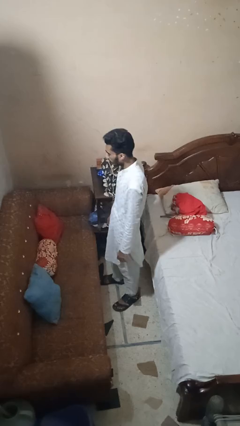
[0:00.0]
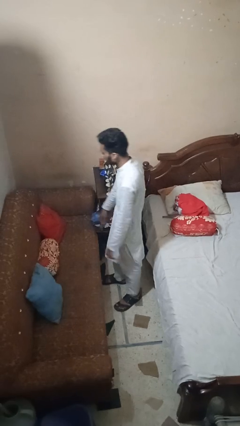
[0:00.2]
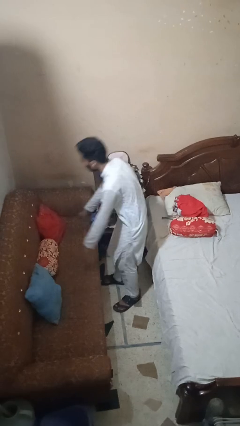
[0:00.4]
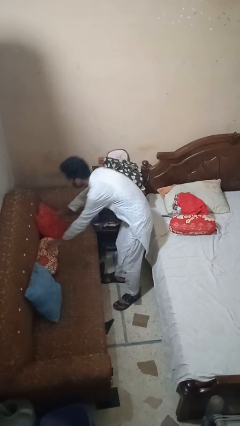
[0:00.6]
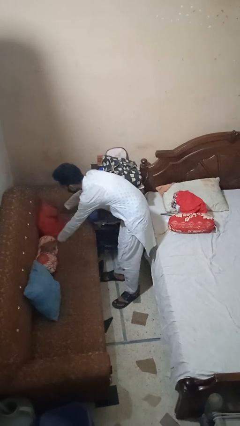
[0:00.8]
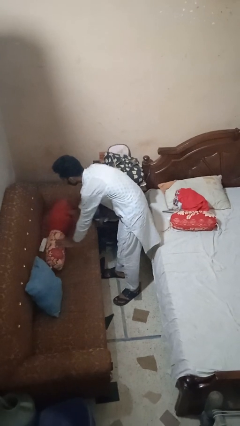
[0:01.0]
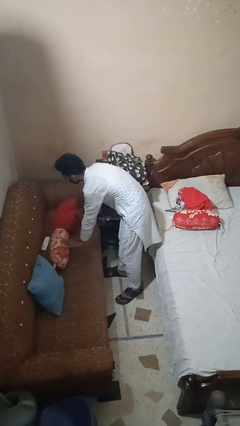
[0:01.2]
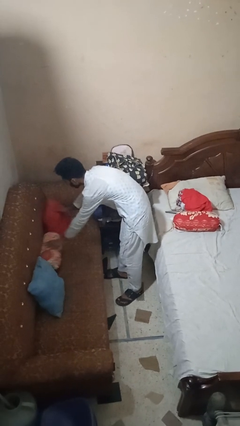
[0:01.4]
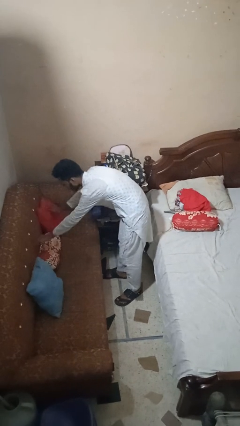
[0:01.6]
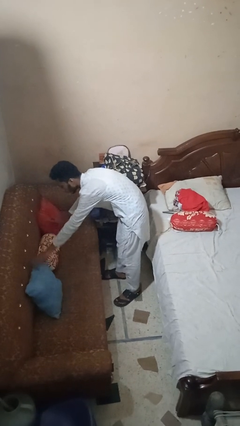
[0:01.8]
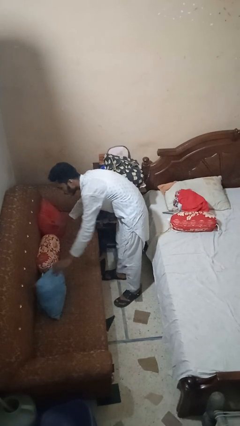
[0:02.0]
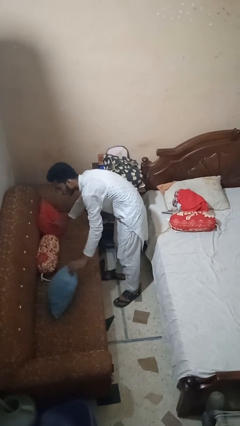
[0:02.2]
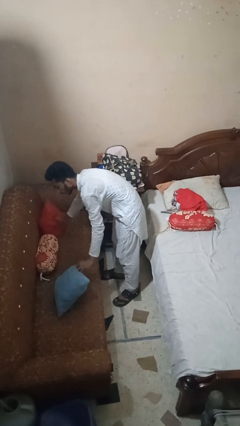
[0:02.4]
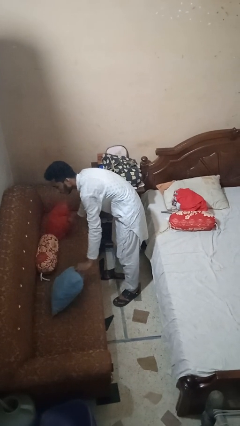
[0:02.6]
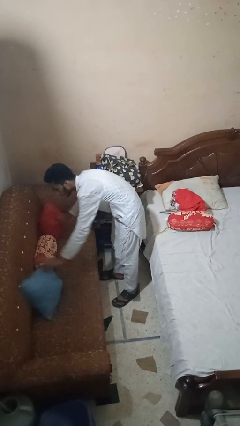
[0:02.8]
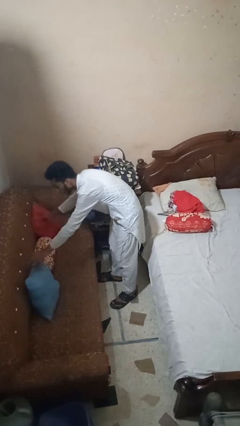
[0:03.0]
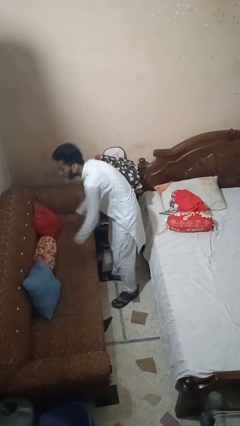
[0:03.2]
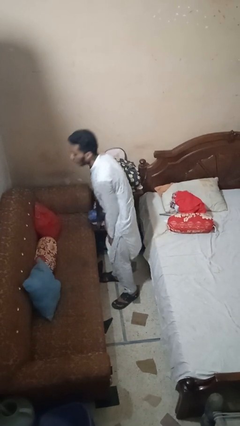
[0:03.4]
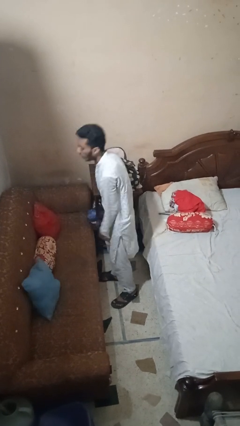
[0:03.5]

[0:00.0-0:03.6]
person searches in couch

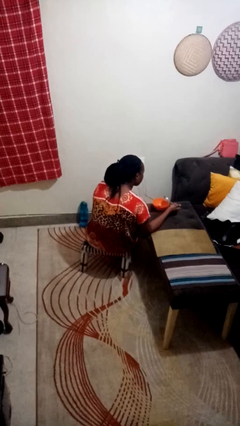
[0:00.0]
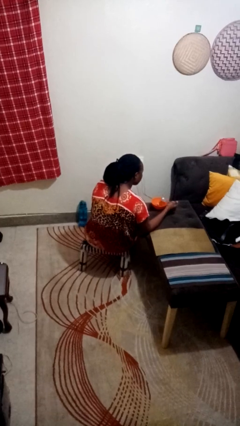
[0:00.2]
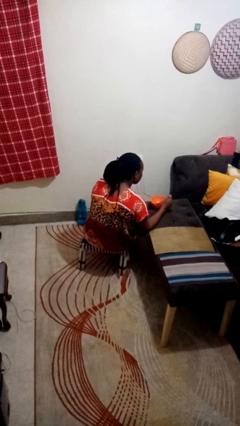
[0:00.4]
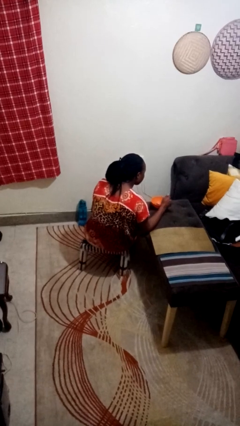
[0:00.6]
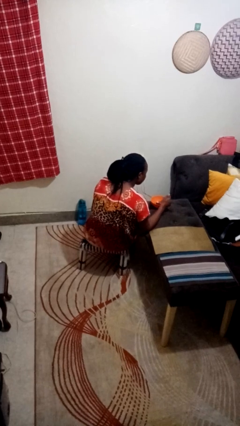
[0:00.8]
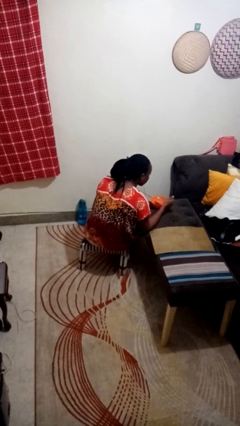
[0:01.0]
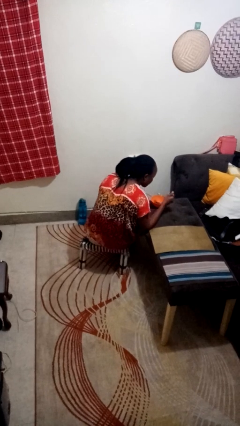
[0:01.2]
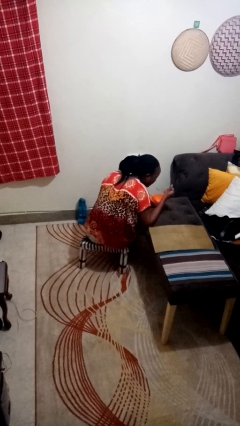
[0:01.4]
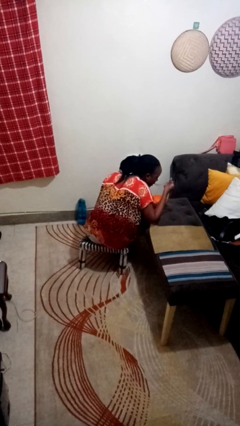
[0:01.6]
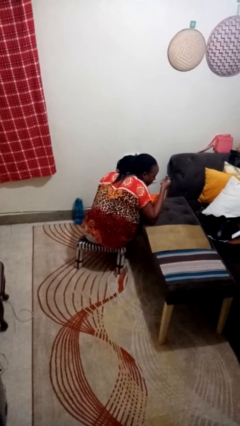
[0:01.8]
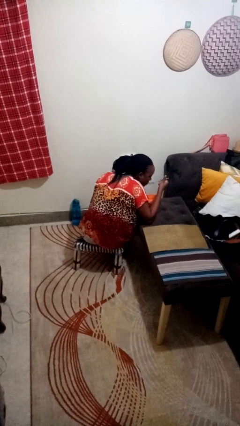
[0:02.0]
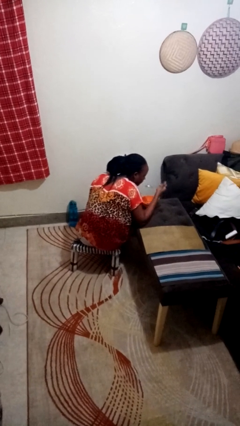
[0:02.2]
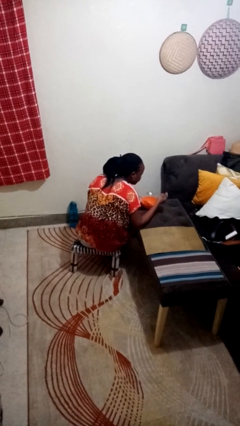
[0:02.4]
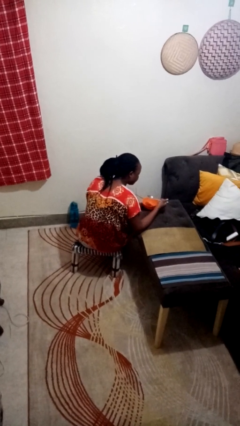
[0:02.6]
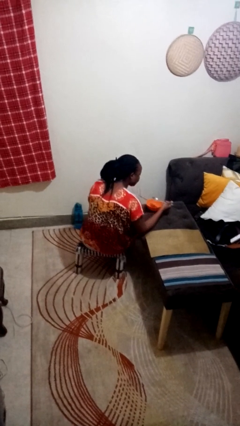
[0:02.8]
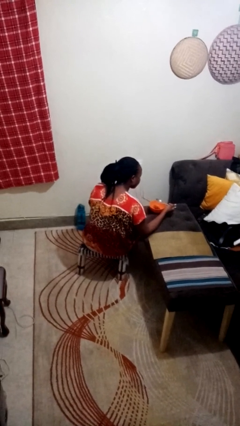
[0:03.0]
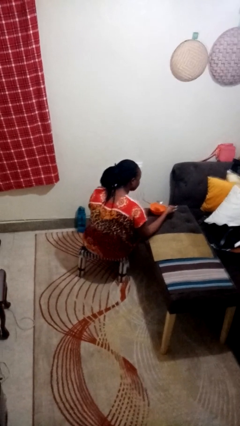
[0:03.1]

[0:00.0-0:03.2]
person eats with utensil

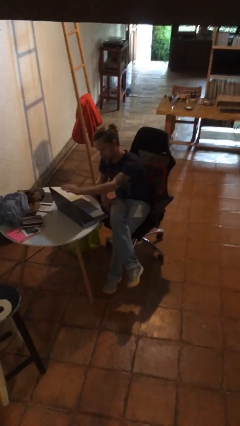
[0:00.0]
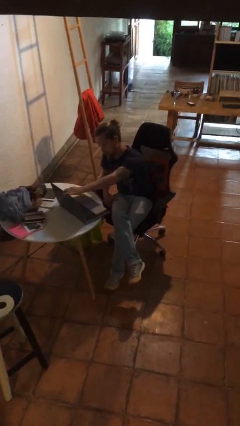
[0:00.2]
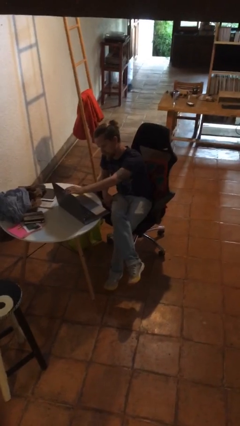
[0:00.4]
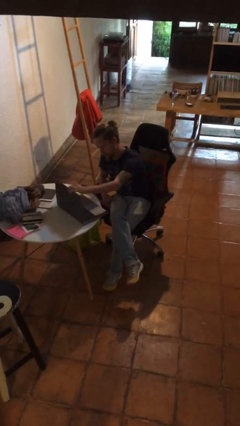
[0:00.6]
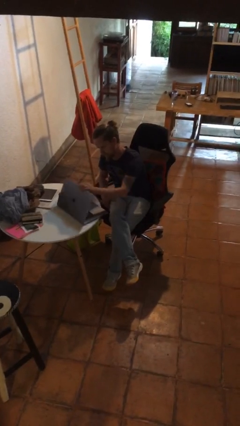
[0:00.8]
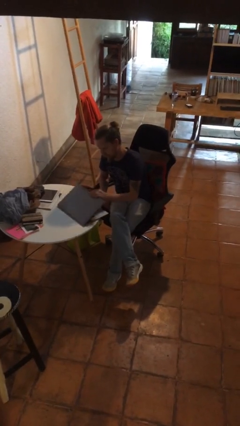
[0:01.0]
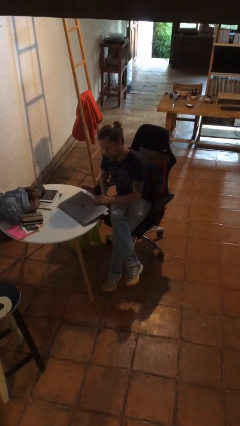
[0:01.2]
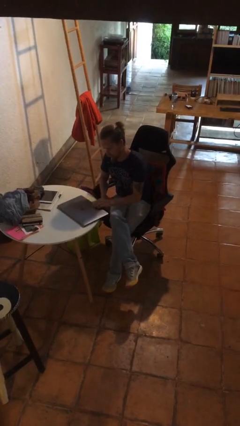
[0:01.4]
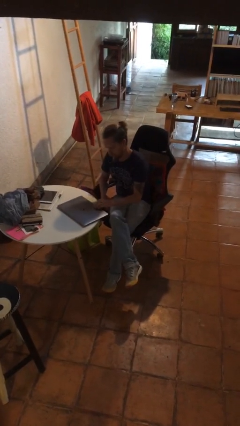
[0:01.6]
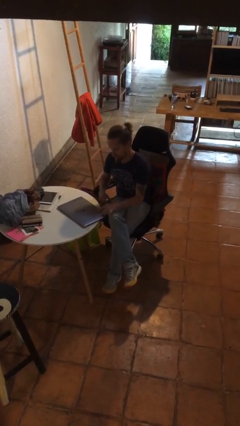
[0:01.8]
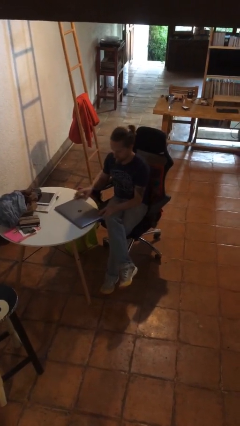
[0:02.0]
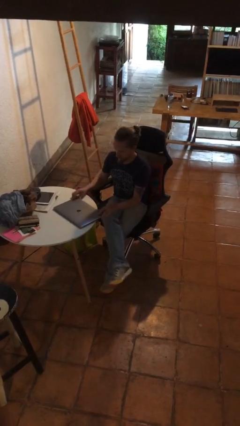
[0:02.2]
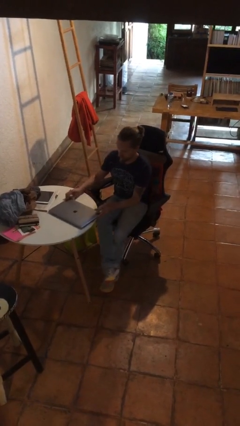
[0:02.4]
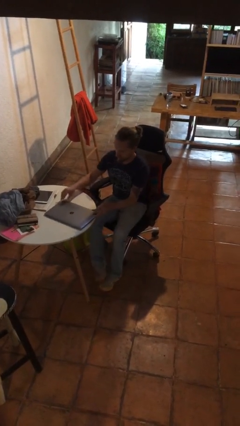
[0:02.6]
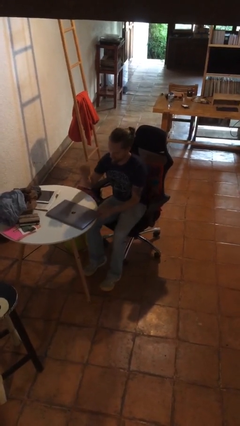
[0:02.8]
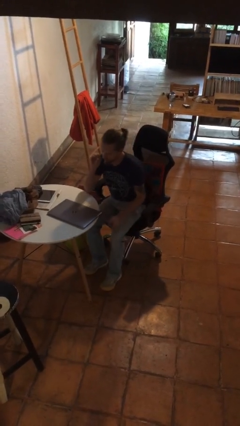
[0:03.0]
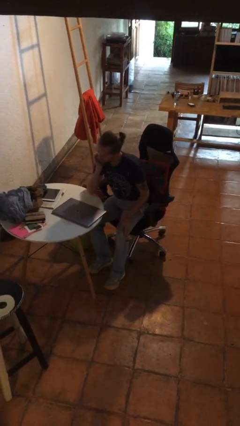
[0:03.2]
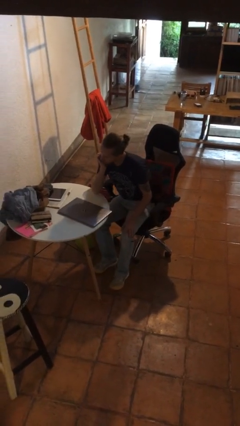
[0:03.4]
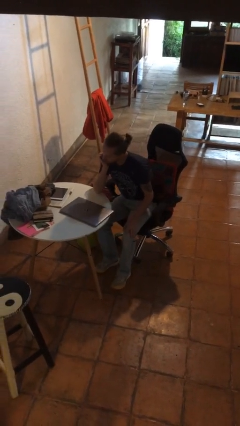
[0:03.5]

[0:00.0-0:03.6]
person closes laptop

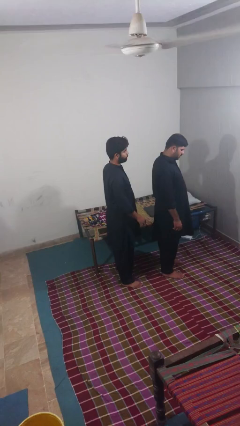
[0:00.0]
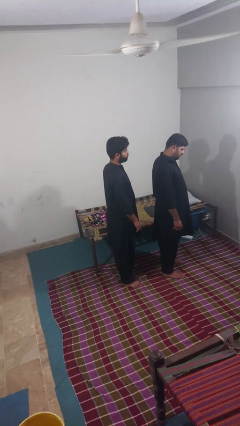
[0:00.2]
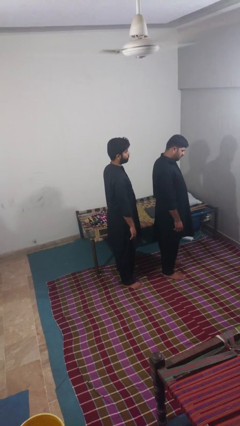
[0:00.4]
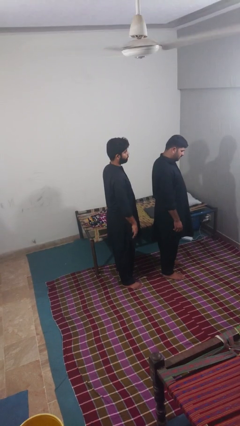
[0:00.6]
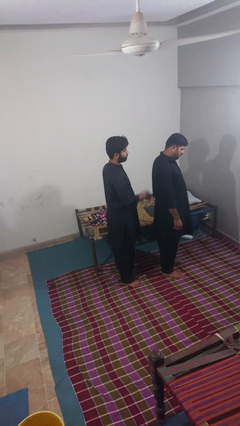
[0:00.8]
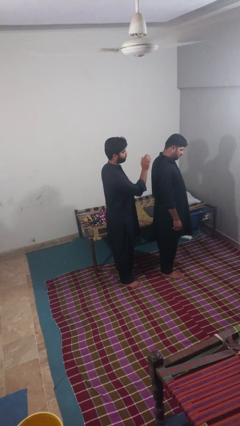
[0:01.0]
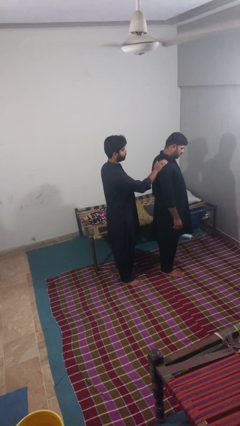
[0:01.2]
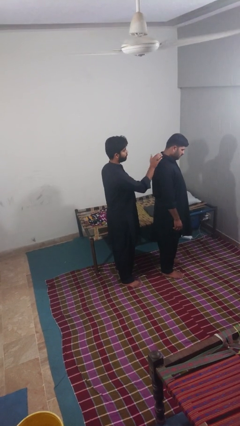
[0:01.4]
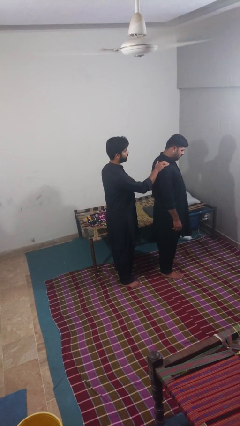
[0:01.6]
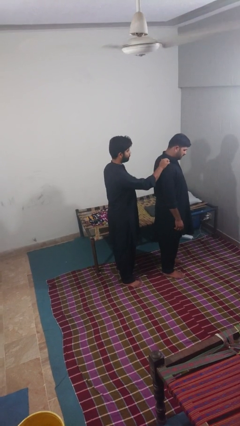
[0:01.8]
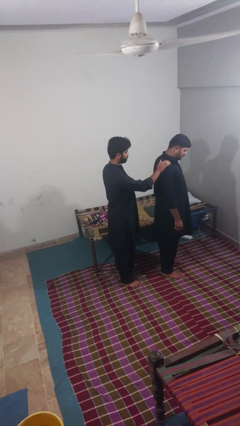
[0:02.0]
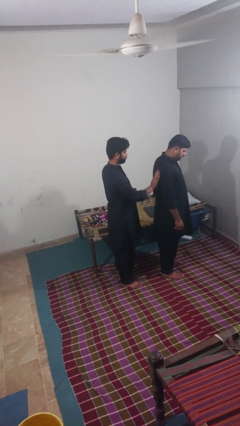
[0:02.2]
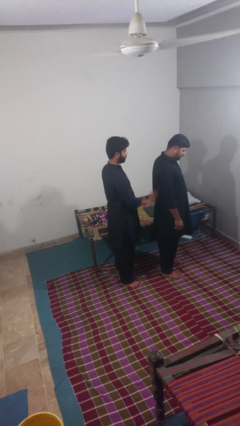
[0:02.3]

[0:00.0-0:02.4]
person touches back of person

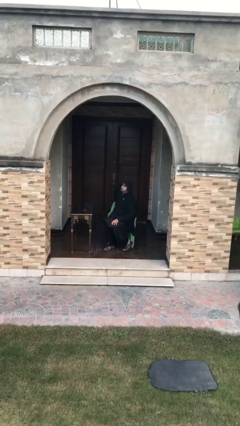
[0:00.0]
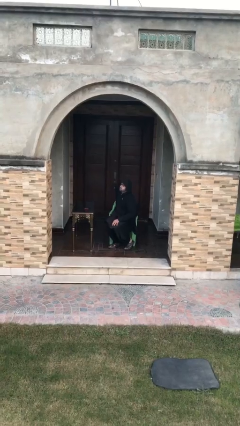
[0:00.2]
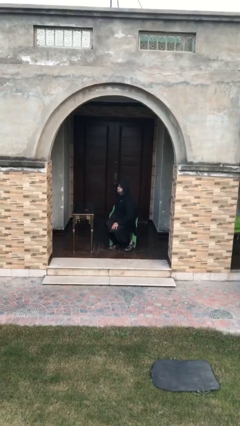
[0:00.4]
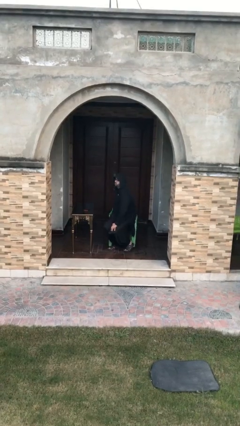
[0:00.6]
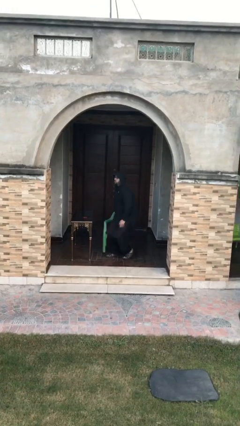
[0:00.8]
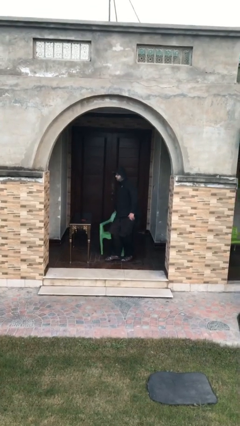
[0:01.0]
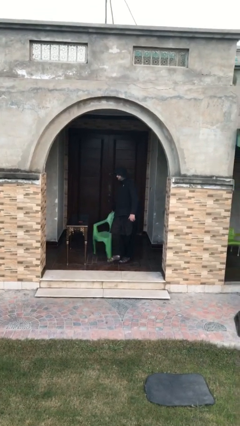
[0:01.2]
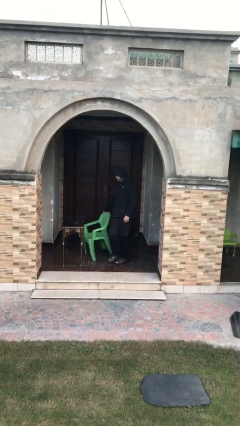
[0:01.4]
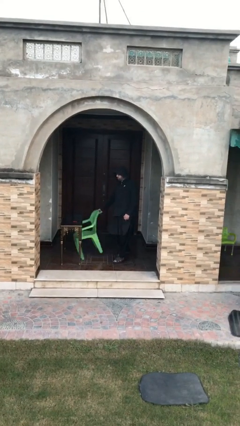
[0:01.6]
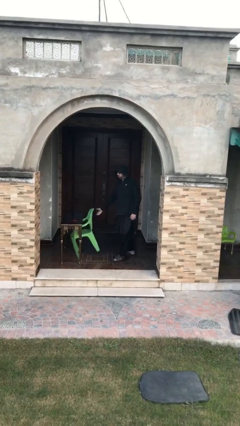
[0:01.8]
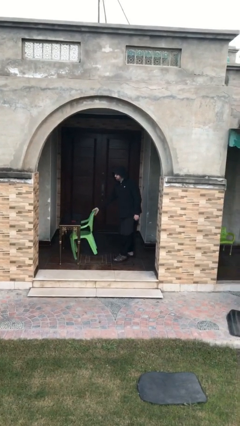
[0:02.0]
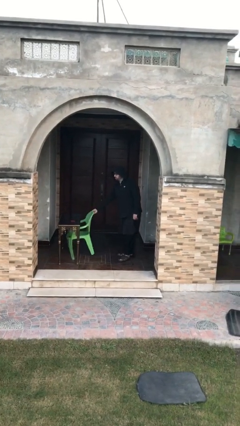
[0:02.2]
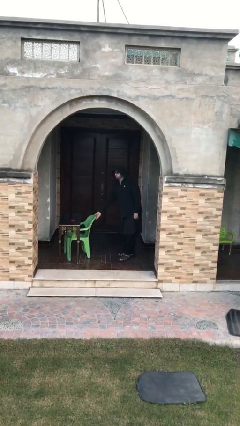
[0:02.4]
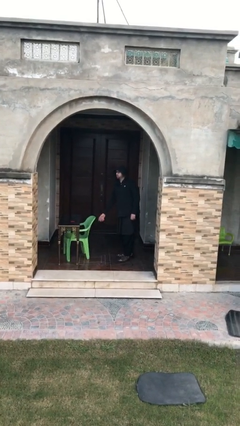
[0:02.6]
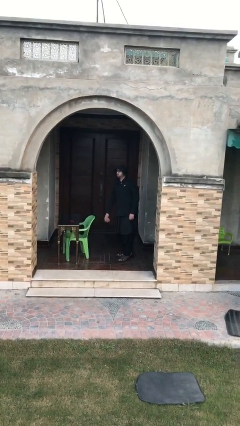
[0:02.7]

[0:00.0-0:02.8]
person stands up

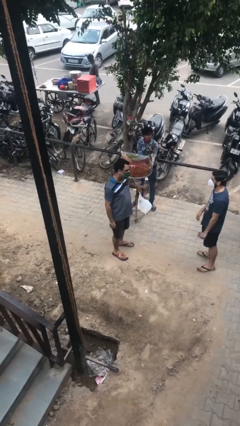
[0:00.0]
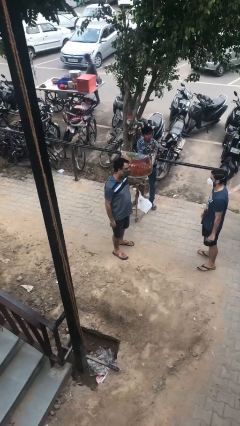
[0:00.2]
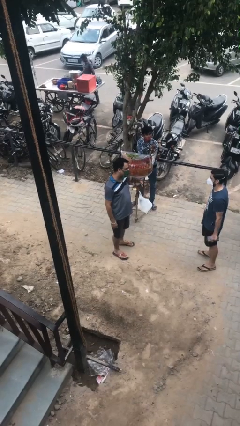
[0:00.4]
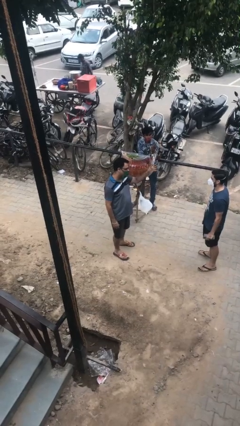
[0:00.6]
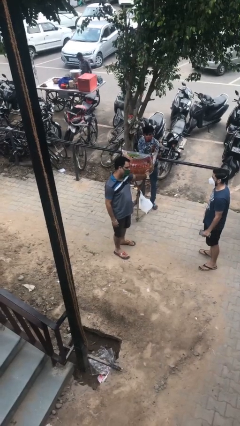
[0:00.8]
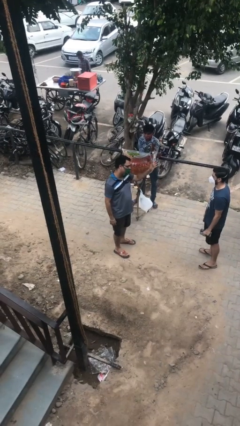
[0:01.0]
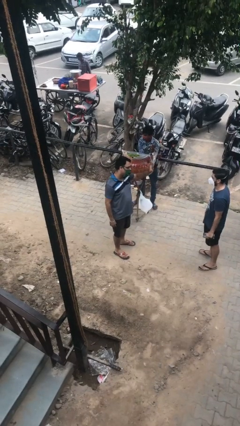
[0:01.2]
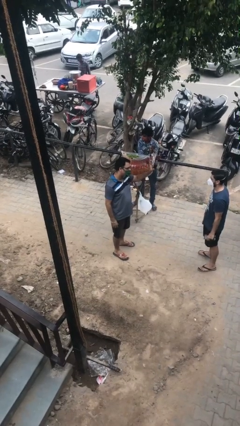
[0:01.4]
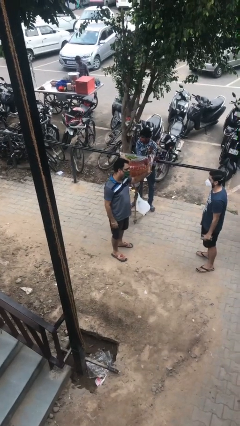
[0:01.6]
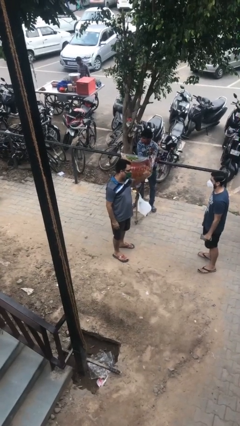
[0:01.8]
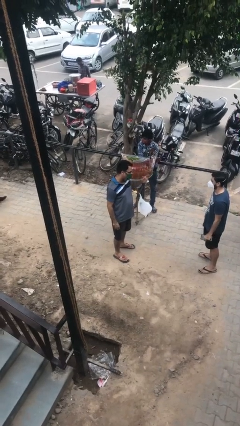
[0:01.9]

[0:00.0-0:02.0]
person waves at person

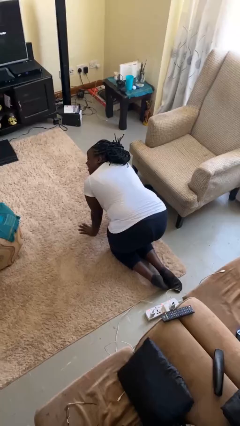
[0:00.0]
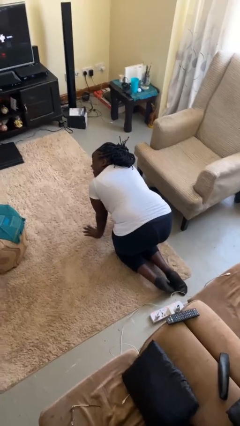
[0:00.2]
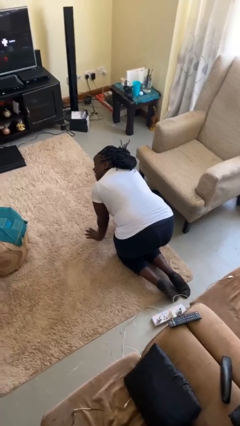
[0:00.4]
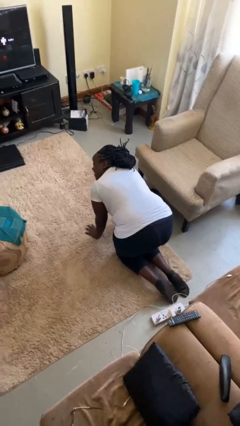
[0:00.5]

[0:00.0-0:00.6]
person crawls
